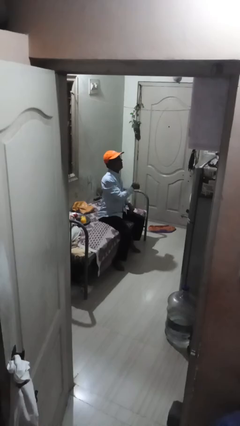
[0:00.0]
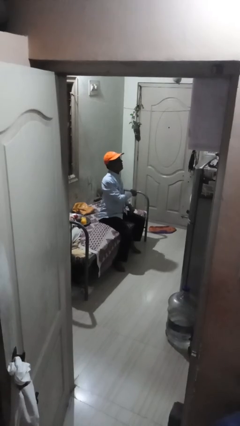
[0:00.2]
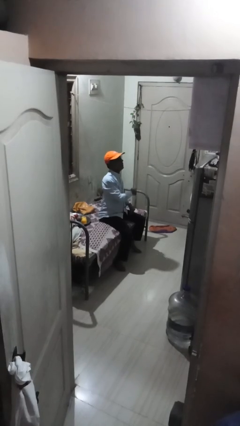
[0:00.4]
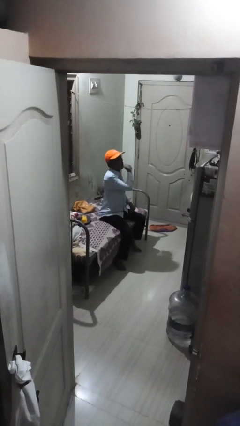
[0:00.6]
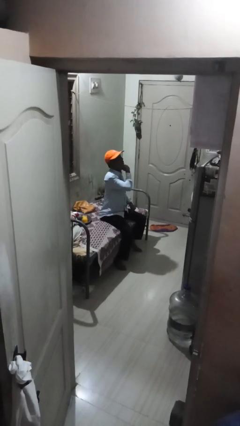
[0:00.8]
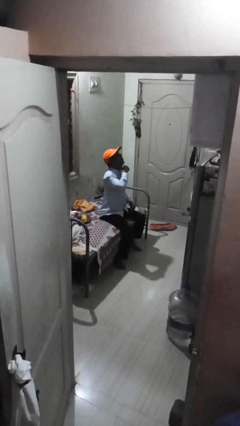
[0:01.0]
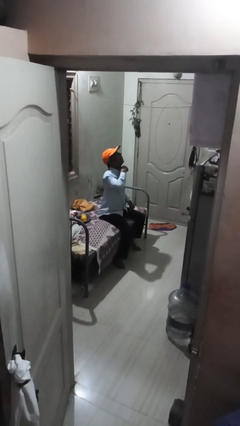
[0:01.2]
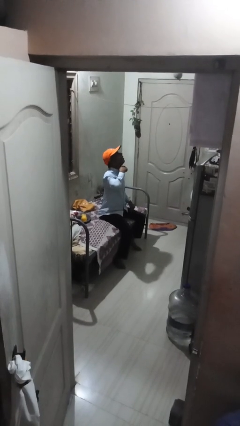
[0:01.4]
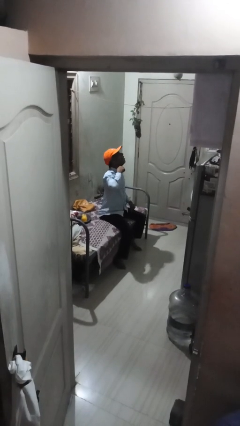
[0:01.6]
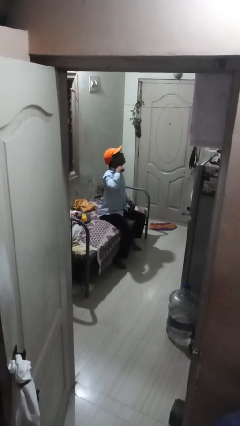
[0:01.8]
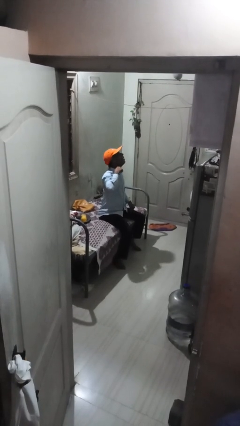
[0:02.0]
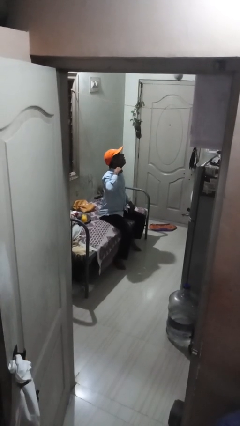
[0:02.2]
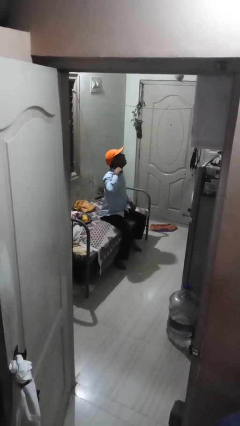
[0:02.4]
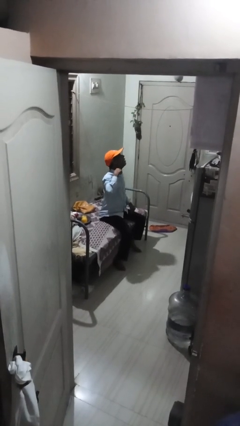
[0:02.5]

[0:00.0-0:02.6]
person gestures cut

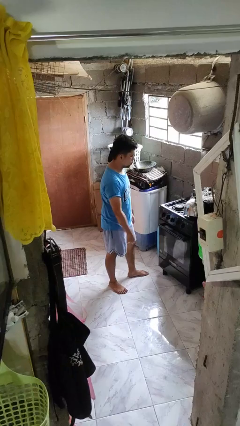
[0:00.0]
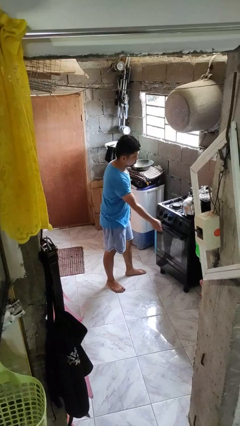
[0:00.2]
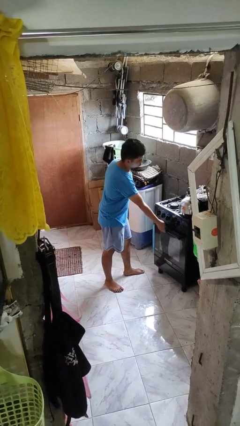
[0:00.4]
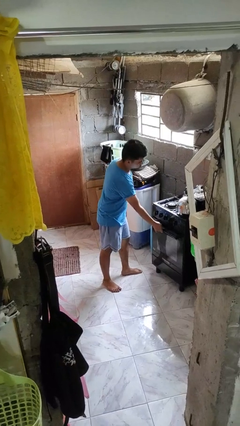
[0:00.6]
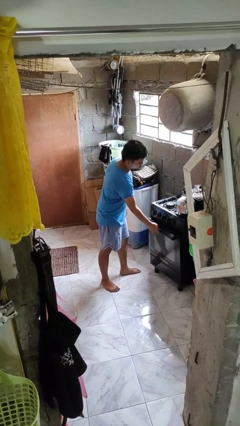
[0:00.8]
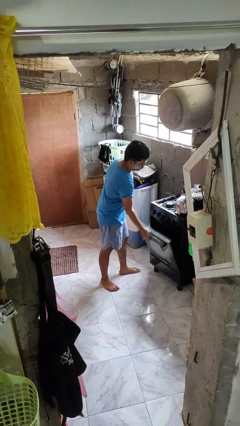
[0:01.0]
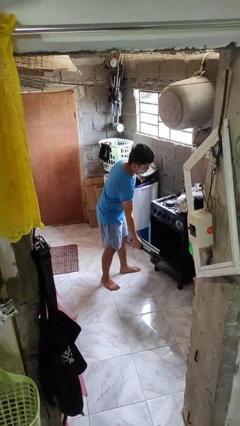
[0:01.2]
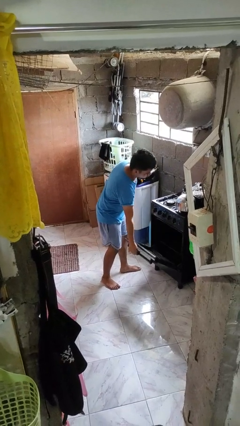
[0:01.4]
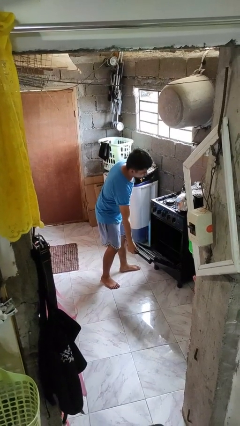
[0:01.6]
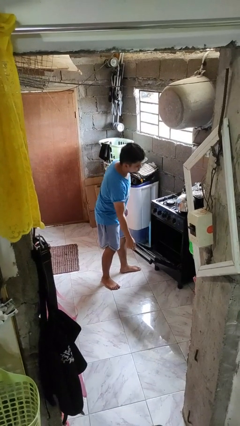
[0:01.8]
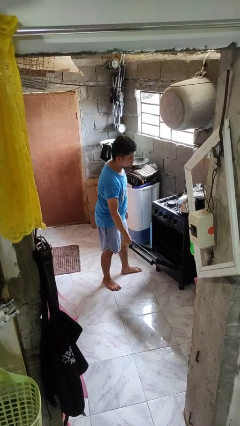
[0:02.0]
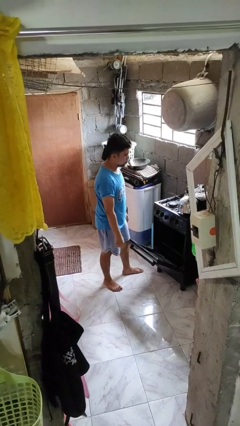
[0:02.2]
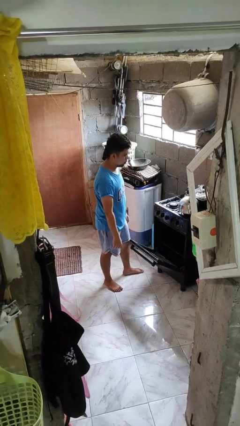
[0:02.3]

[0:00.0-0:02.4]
person opens oven door

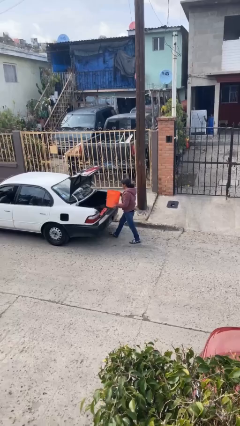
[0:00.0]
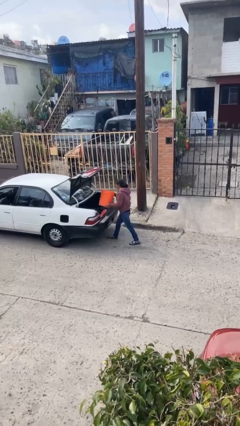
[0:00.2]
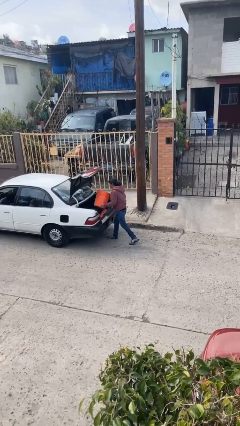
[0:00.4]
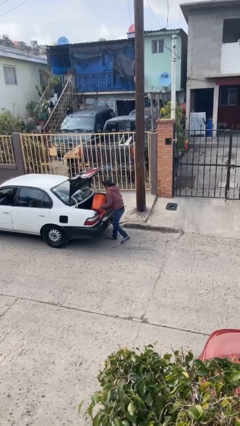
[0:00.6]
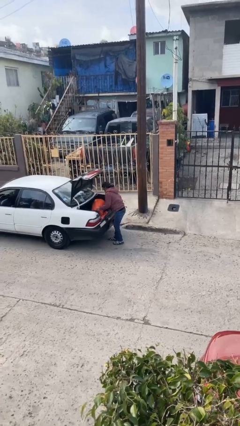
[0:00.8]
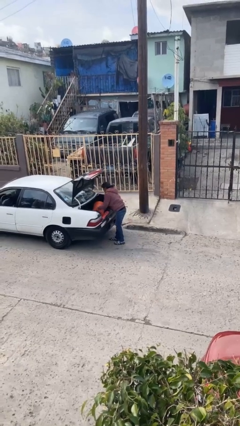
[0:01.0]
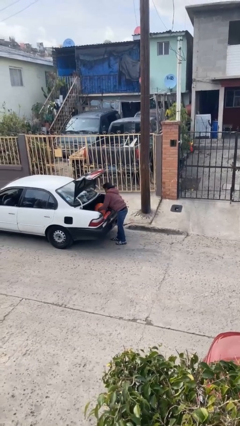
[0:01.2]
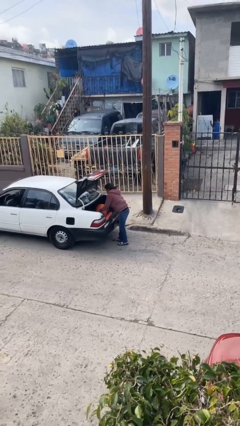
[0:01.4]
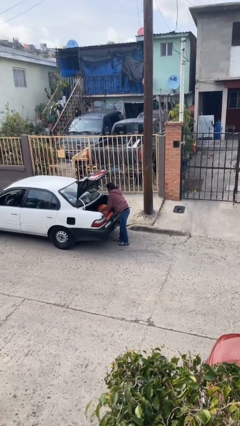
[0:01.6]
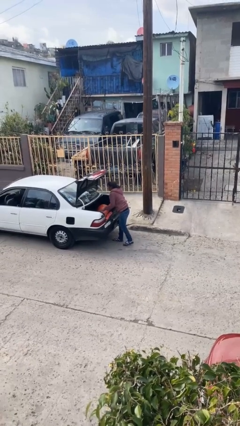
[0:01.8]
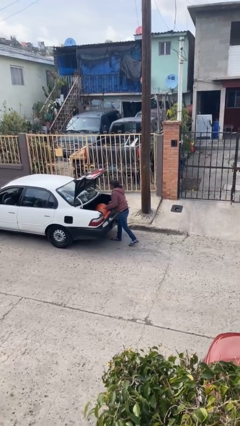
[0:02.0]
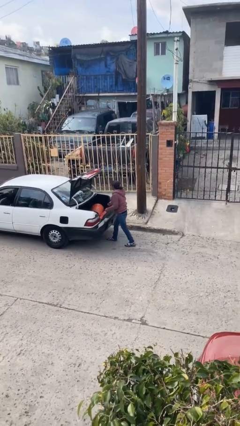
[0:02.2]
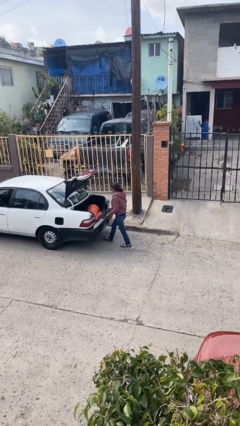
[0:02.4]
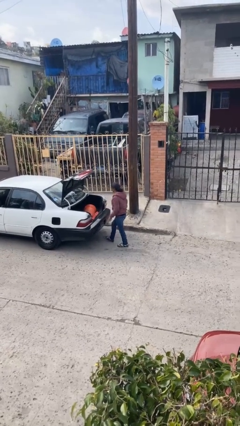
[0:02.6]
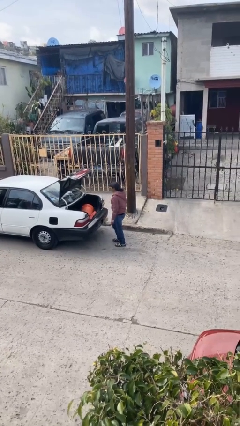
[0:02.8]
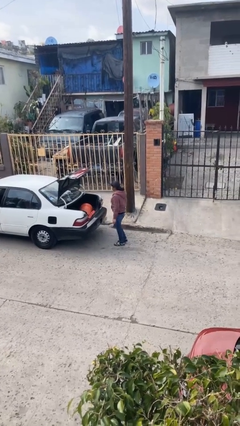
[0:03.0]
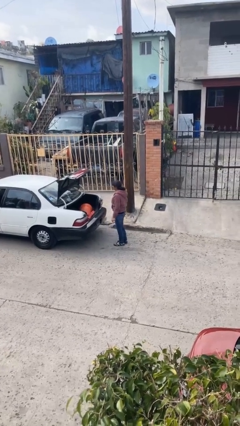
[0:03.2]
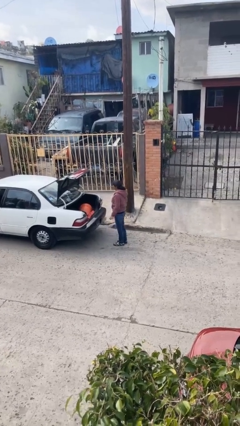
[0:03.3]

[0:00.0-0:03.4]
person loads car

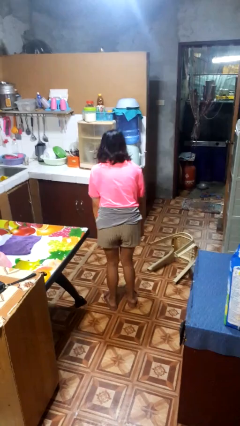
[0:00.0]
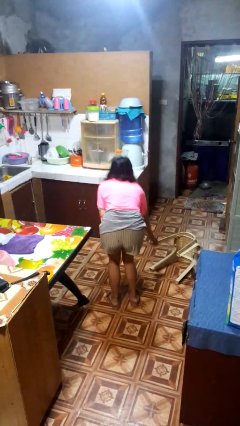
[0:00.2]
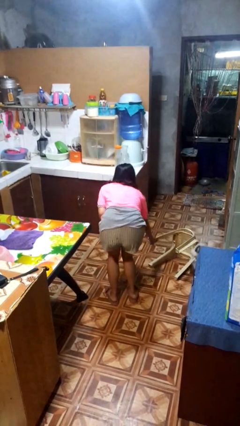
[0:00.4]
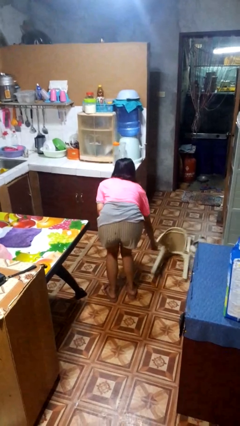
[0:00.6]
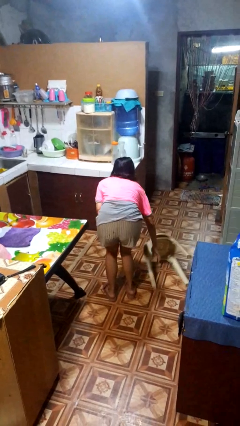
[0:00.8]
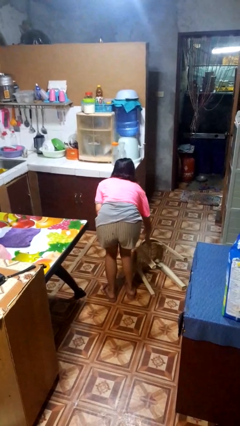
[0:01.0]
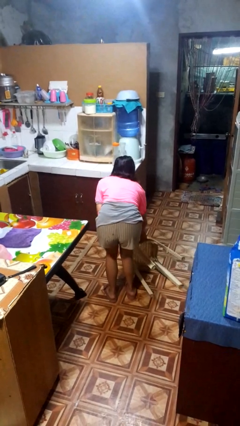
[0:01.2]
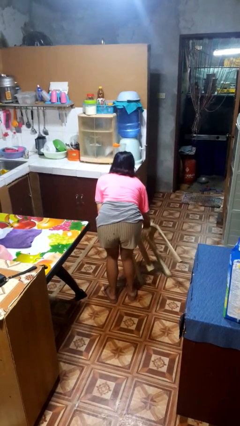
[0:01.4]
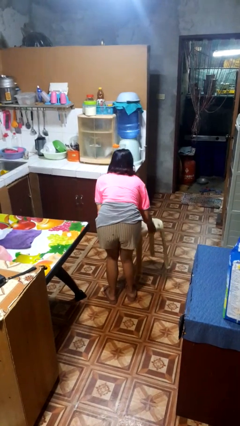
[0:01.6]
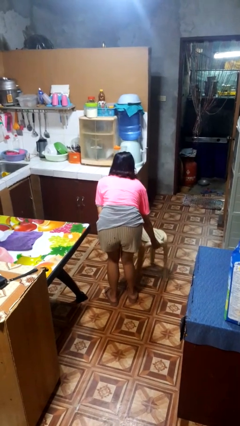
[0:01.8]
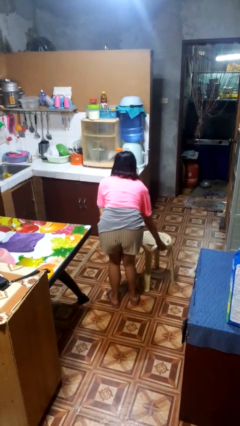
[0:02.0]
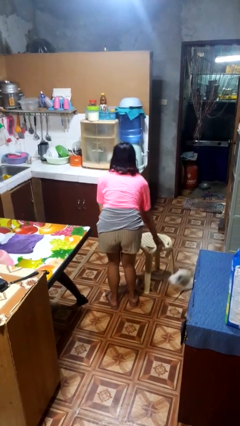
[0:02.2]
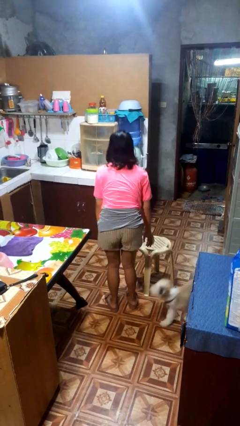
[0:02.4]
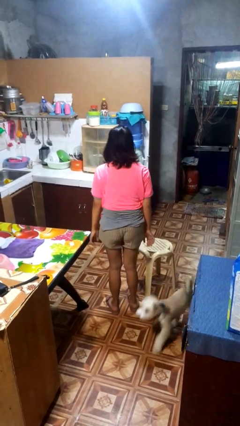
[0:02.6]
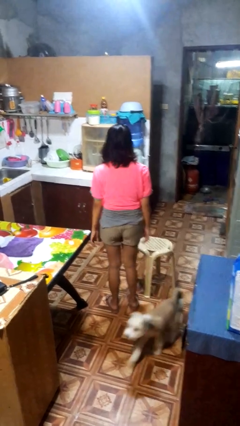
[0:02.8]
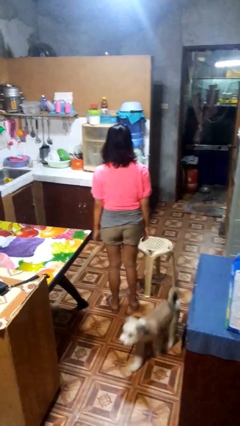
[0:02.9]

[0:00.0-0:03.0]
person sets upright furniture

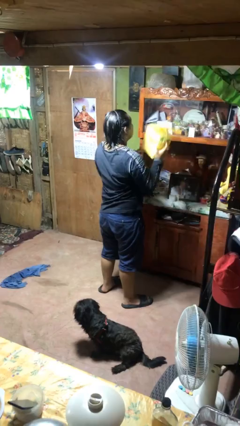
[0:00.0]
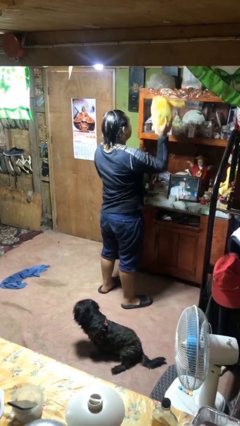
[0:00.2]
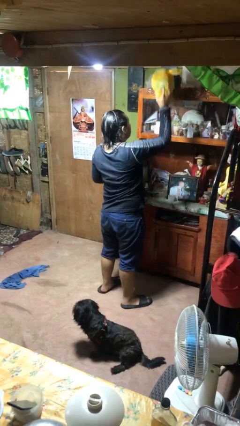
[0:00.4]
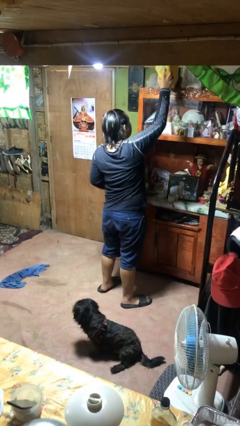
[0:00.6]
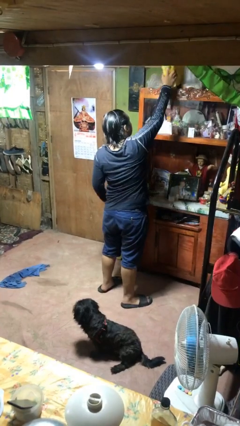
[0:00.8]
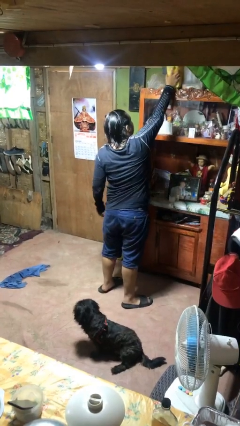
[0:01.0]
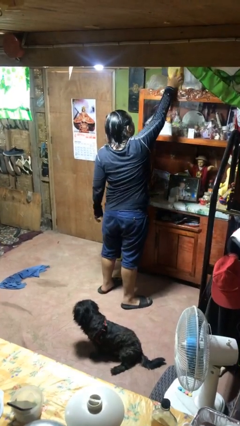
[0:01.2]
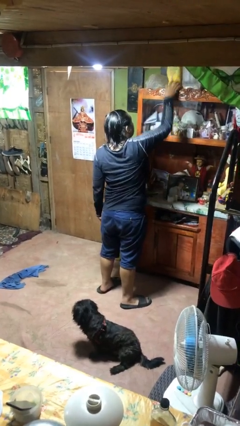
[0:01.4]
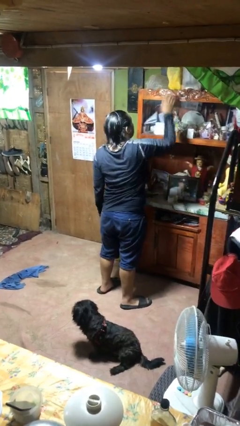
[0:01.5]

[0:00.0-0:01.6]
person puts down object on shelf

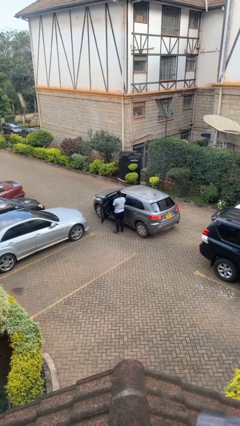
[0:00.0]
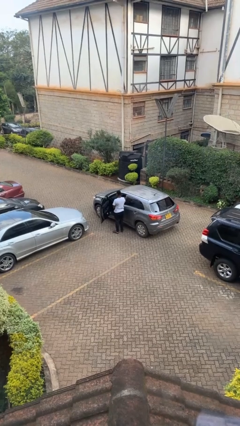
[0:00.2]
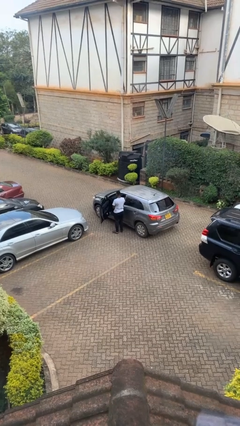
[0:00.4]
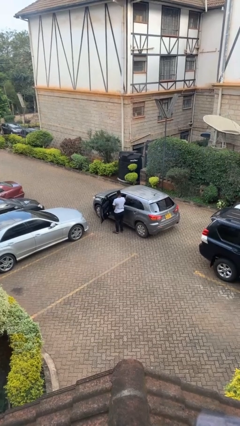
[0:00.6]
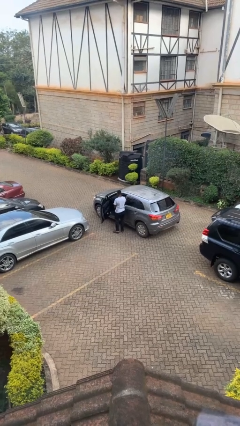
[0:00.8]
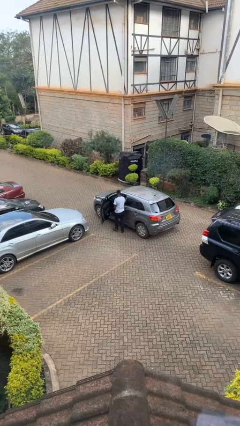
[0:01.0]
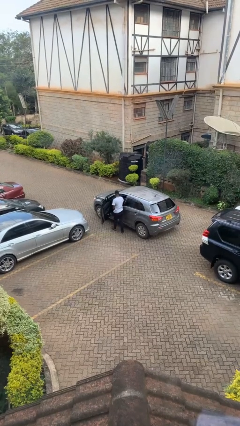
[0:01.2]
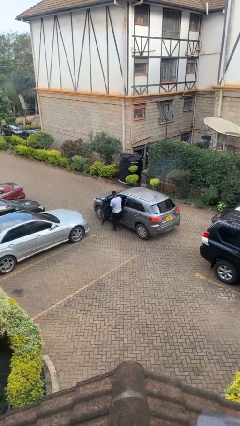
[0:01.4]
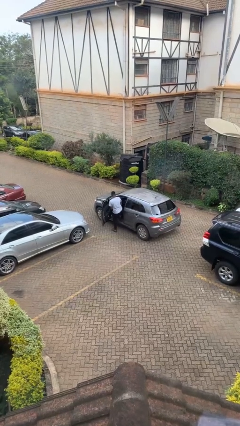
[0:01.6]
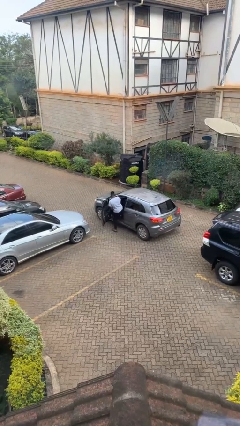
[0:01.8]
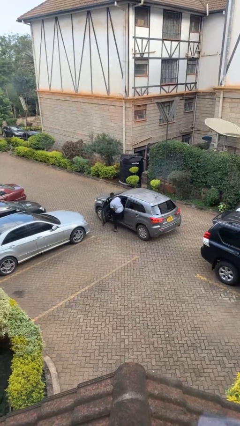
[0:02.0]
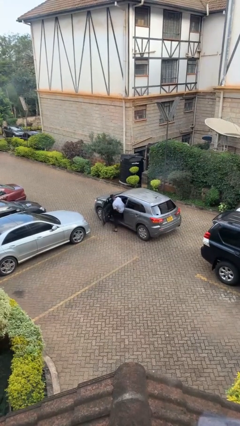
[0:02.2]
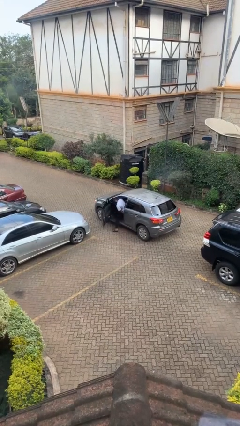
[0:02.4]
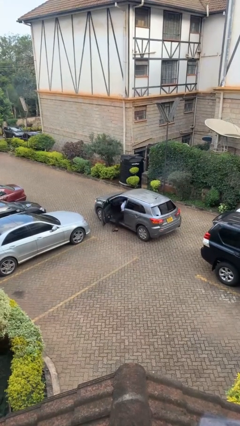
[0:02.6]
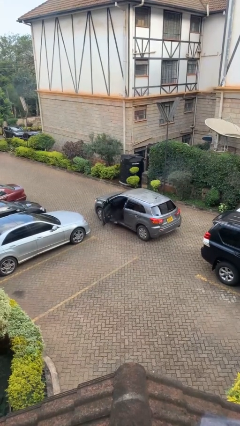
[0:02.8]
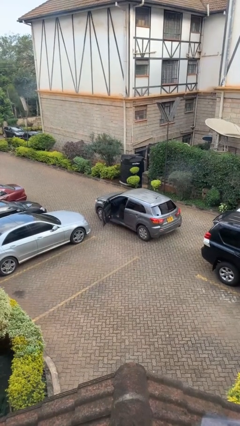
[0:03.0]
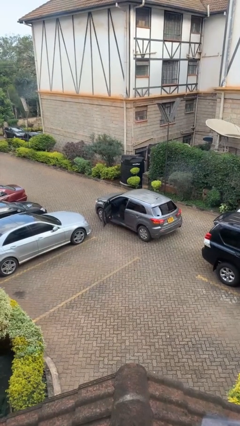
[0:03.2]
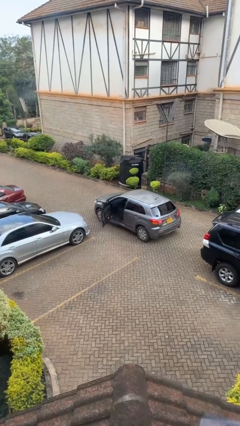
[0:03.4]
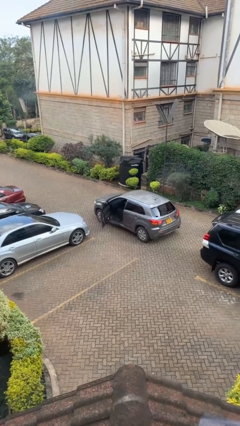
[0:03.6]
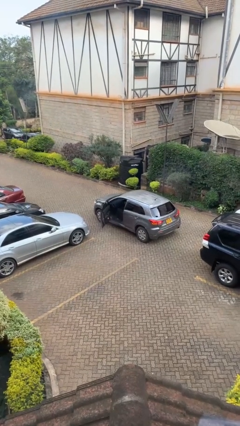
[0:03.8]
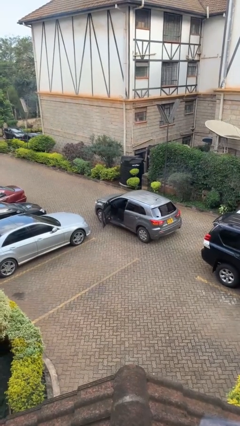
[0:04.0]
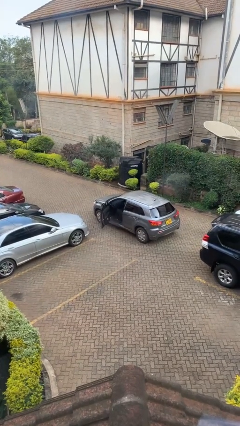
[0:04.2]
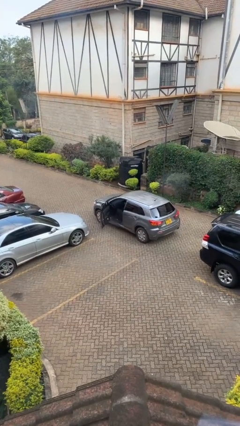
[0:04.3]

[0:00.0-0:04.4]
person enters car

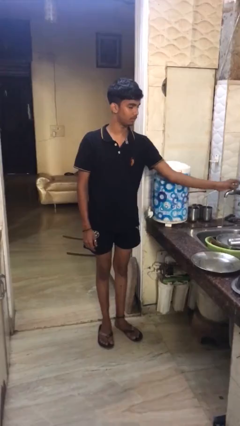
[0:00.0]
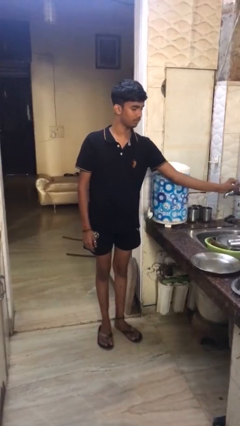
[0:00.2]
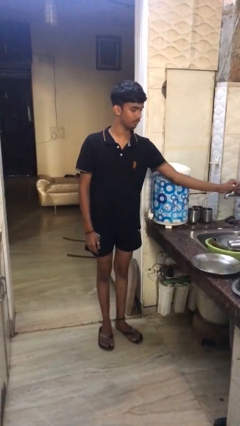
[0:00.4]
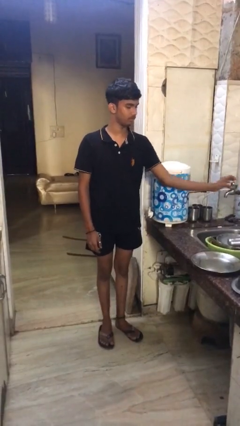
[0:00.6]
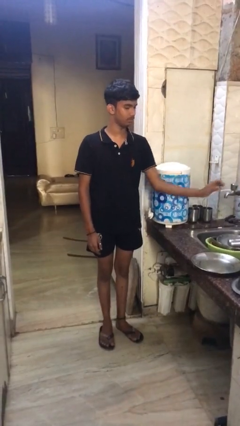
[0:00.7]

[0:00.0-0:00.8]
person turns off faucet
